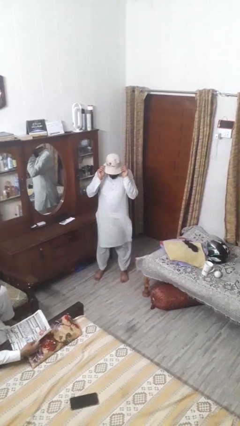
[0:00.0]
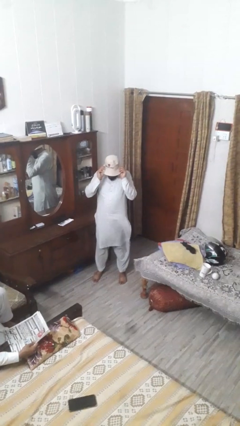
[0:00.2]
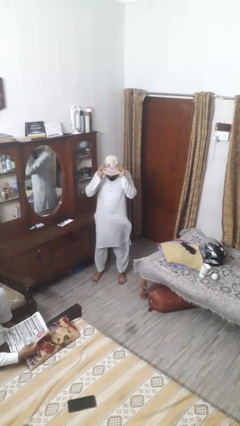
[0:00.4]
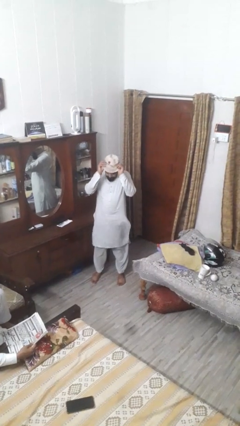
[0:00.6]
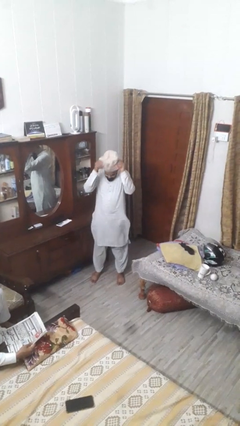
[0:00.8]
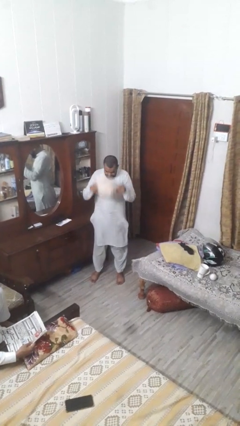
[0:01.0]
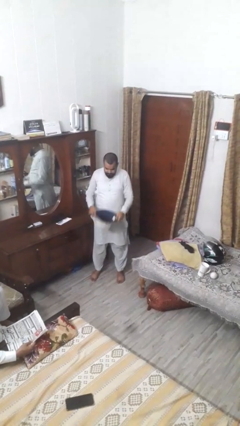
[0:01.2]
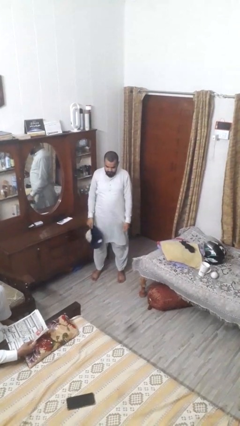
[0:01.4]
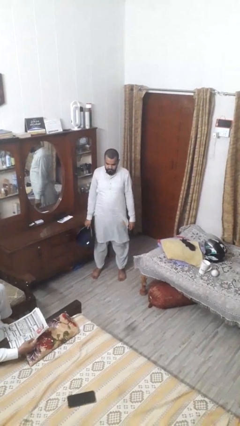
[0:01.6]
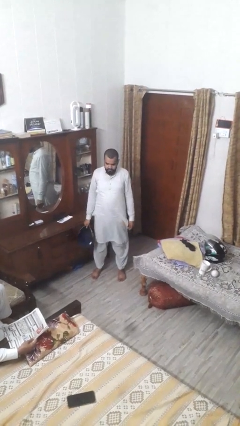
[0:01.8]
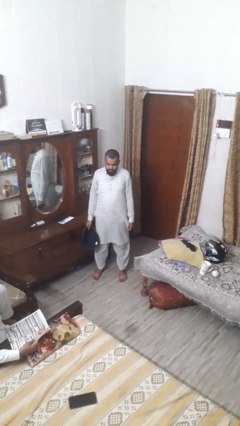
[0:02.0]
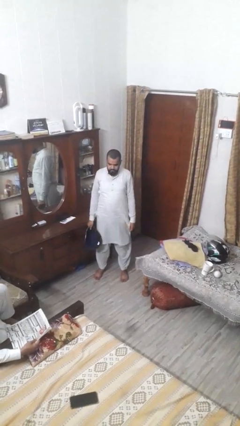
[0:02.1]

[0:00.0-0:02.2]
person takes off hat

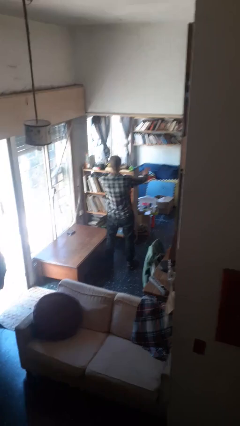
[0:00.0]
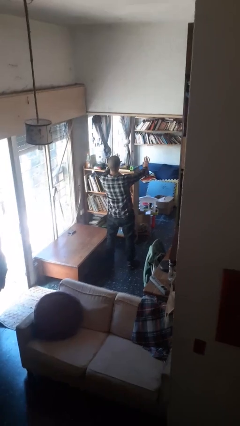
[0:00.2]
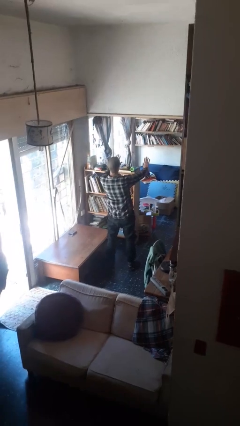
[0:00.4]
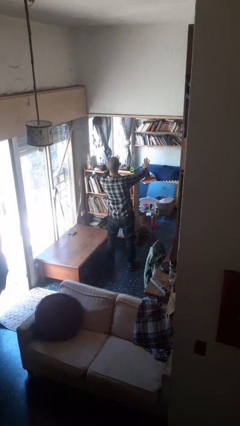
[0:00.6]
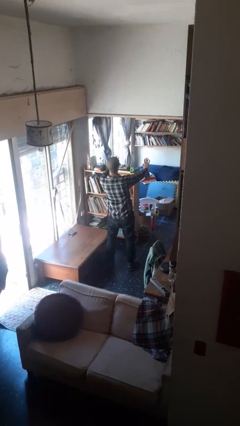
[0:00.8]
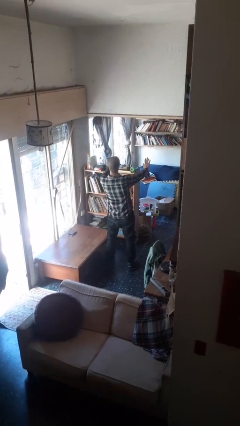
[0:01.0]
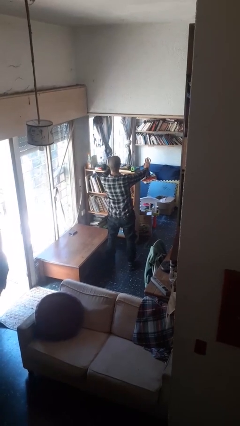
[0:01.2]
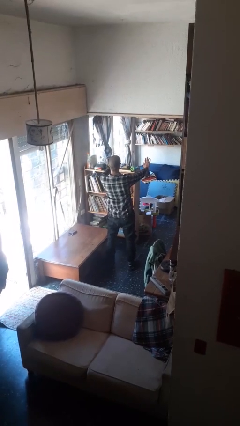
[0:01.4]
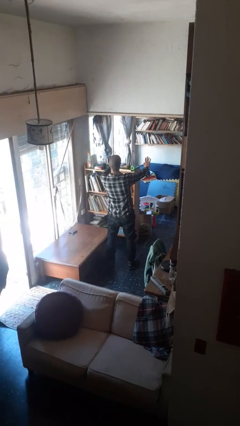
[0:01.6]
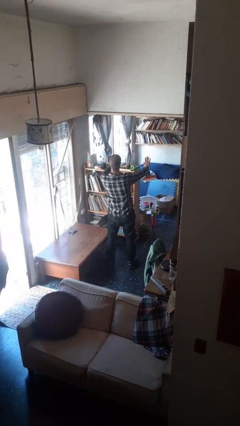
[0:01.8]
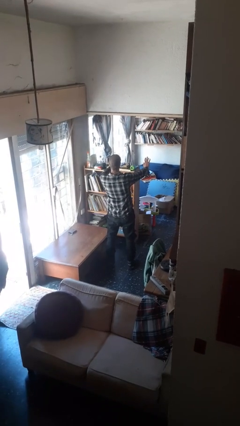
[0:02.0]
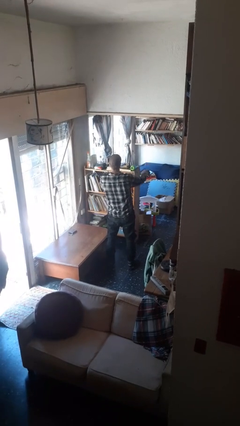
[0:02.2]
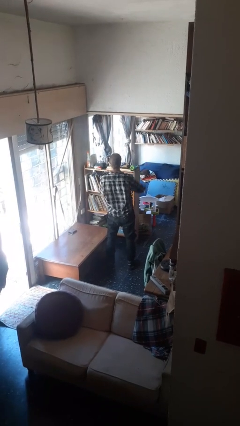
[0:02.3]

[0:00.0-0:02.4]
person gestures stop

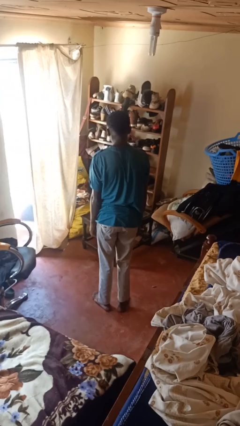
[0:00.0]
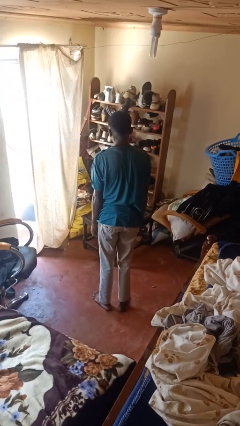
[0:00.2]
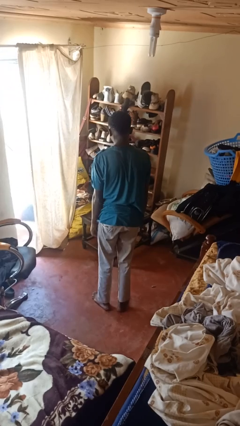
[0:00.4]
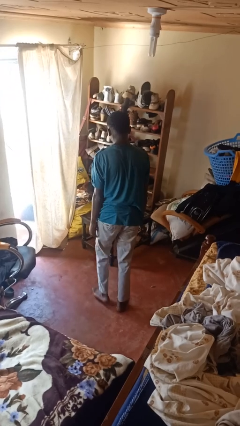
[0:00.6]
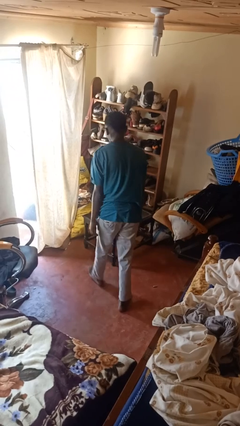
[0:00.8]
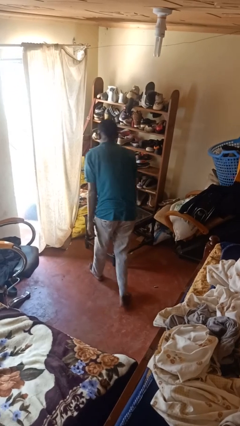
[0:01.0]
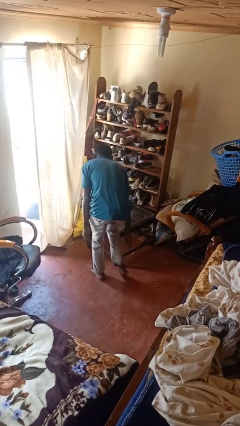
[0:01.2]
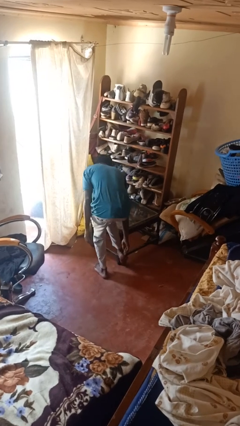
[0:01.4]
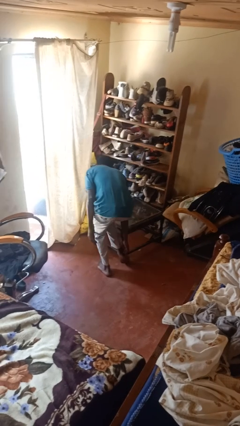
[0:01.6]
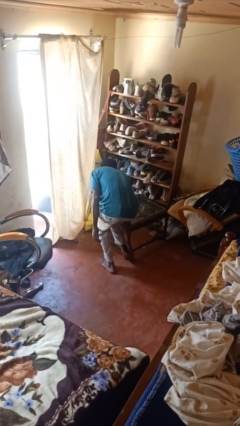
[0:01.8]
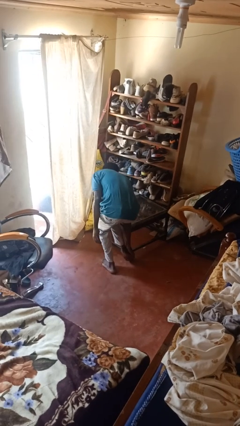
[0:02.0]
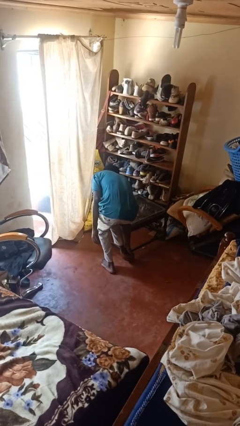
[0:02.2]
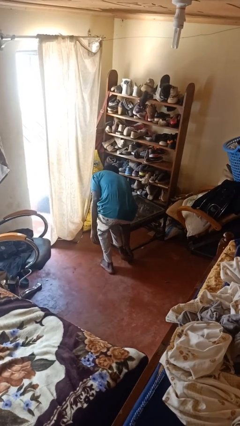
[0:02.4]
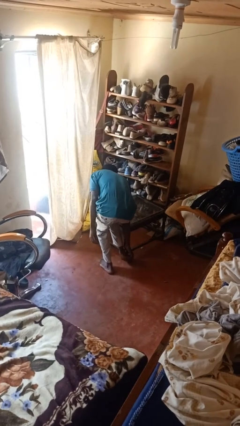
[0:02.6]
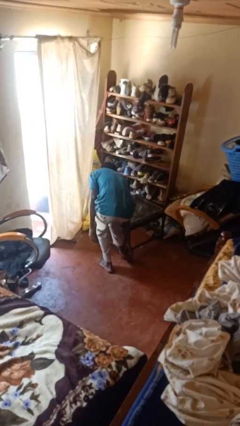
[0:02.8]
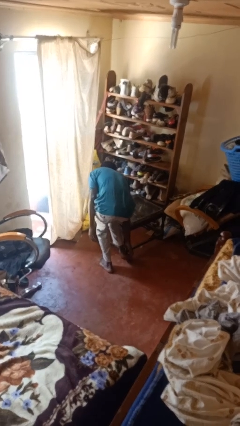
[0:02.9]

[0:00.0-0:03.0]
person stubs toe

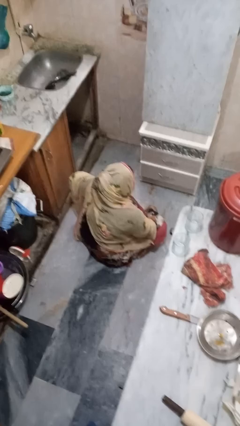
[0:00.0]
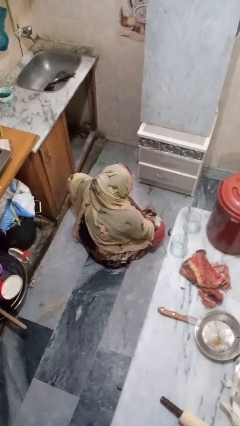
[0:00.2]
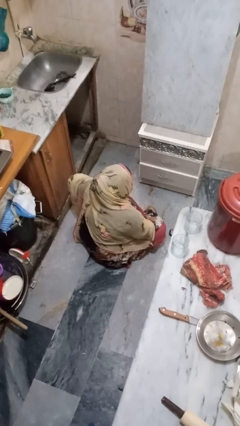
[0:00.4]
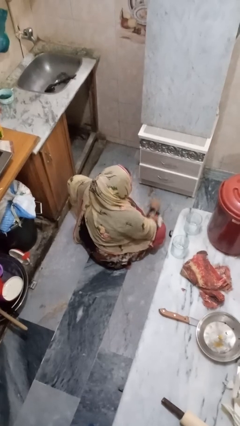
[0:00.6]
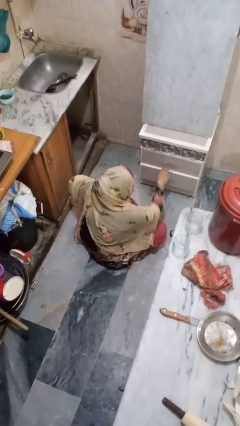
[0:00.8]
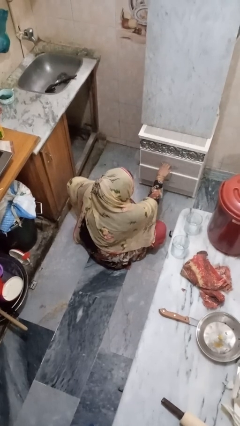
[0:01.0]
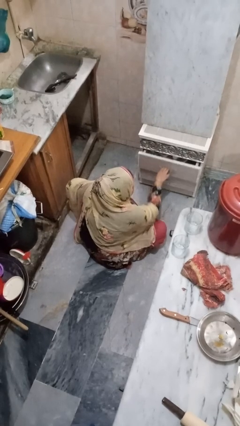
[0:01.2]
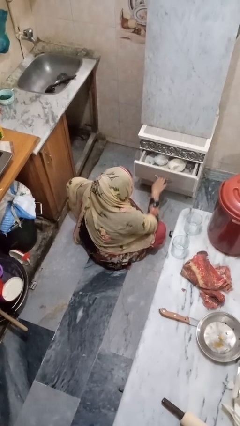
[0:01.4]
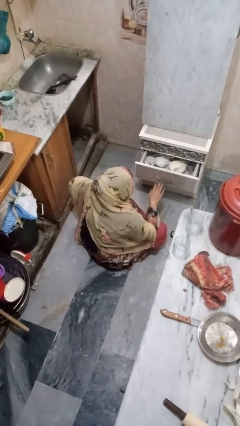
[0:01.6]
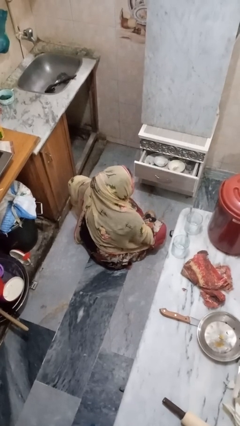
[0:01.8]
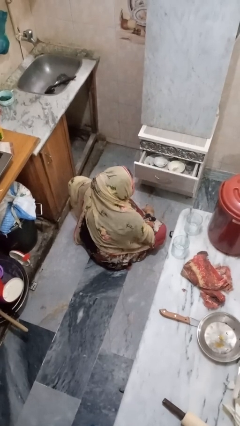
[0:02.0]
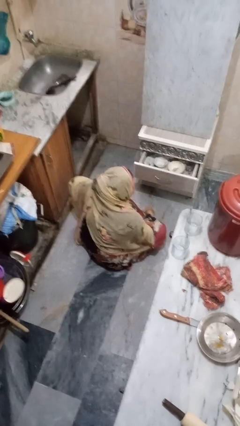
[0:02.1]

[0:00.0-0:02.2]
person opens kitchen drawer

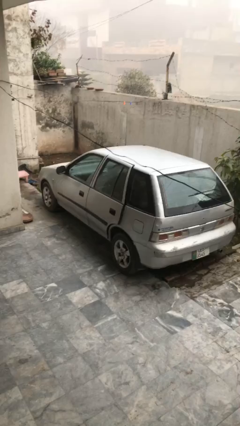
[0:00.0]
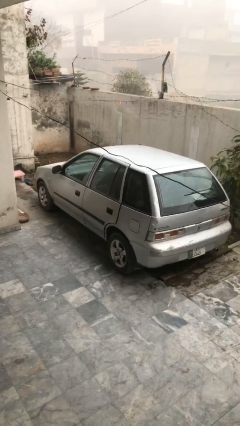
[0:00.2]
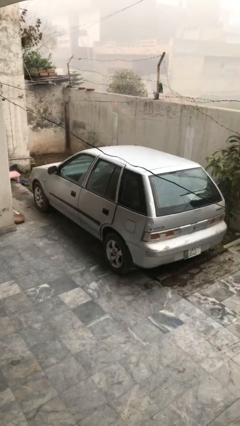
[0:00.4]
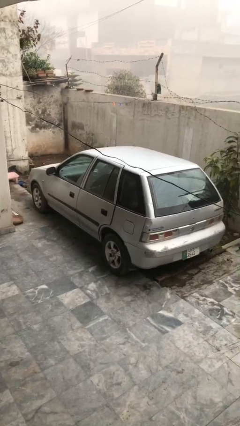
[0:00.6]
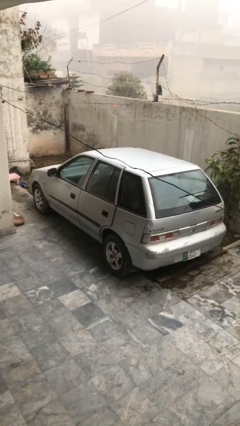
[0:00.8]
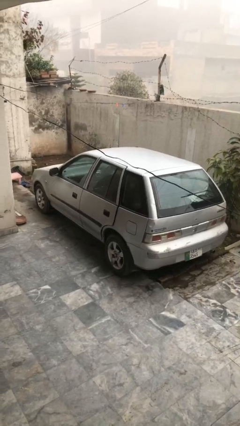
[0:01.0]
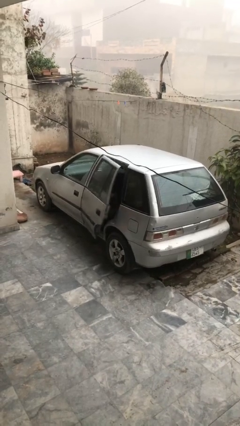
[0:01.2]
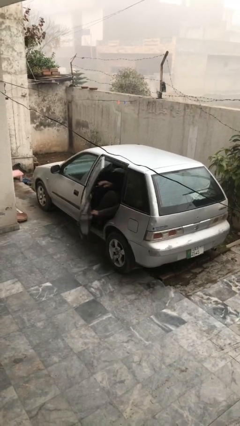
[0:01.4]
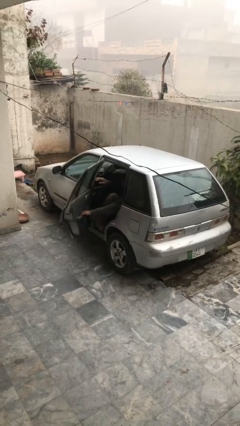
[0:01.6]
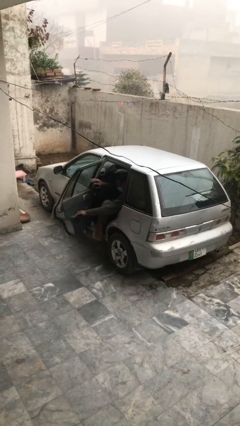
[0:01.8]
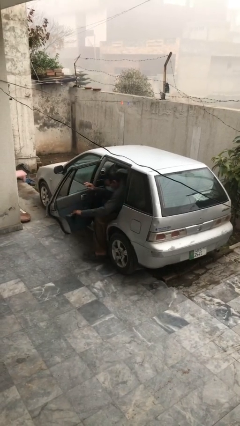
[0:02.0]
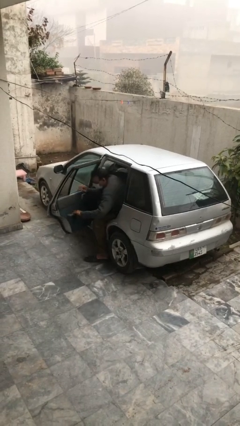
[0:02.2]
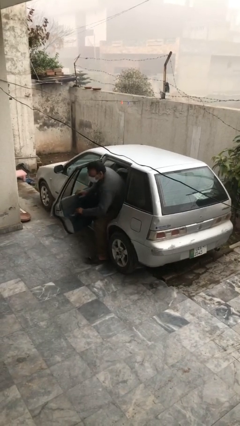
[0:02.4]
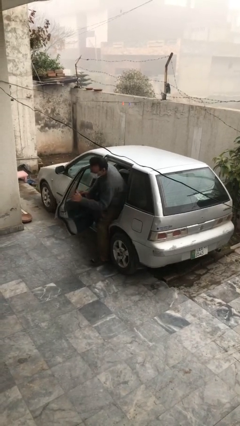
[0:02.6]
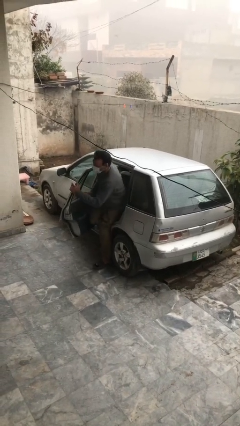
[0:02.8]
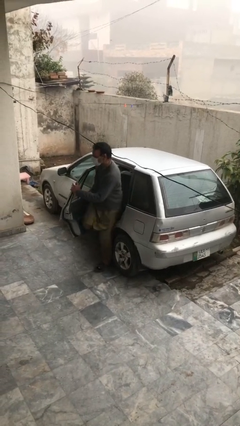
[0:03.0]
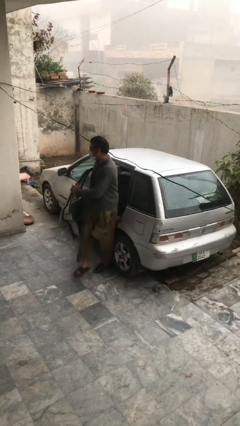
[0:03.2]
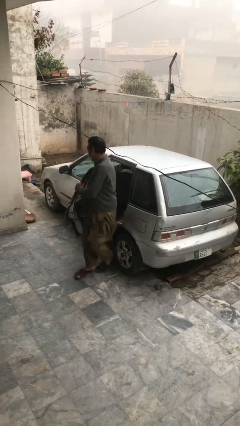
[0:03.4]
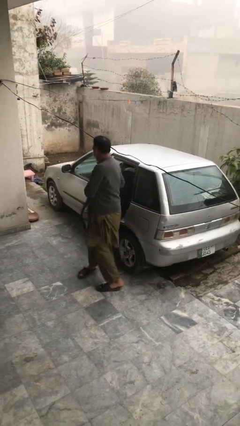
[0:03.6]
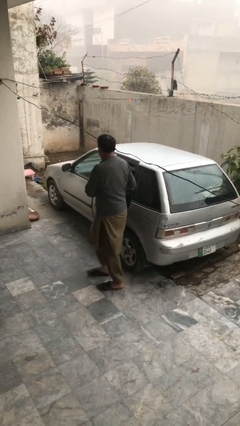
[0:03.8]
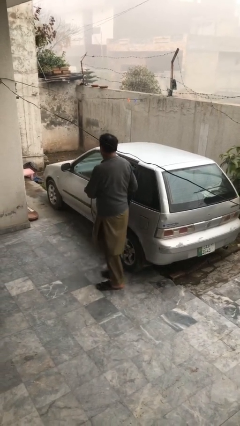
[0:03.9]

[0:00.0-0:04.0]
car drops off person

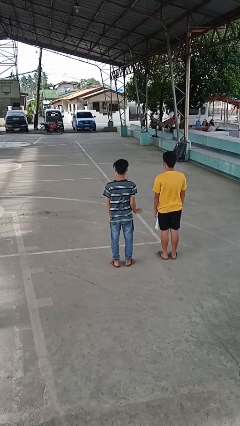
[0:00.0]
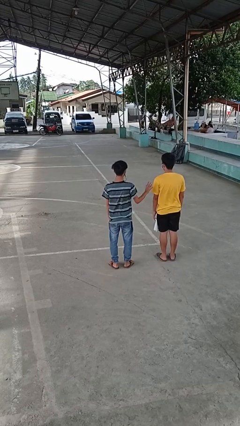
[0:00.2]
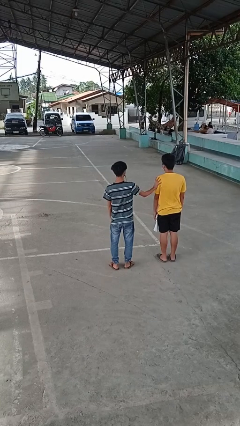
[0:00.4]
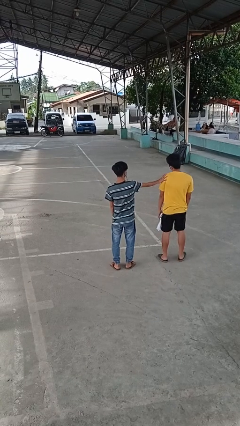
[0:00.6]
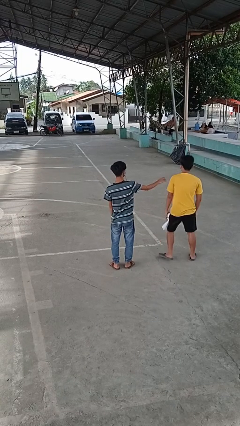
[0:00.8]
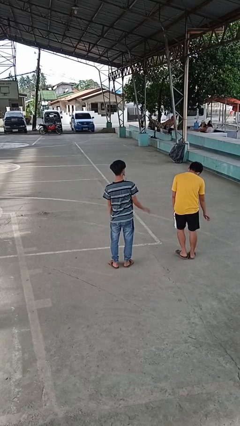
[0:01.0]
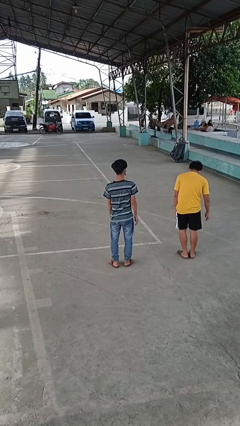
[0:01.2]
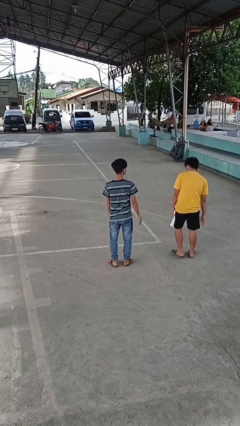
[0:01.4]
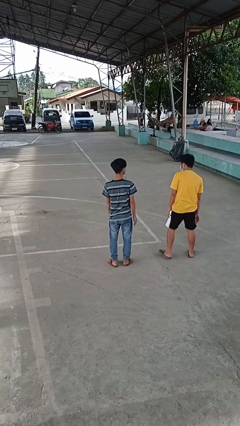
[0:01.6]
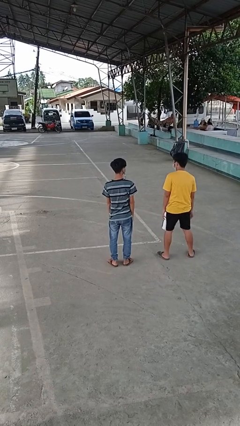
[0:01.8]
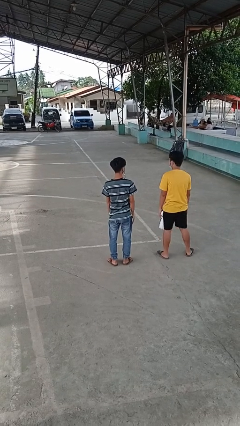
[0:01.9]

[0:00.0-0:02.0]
person shoves person

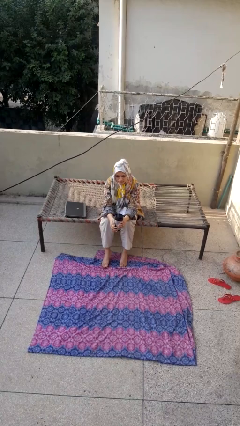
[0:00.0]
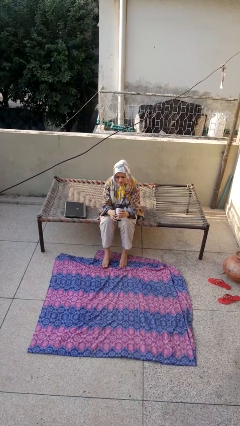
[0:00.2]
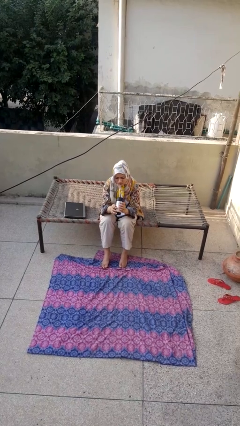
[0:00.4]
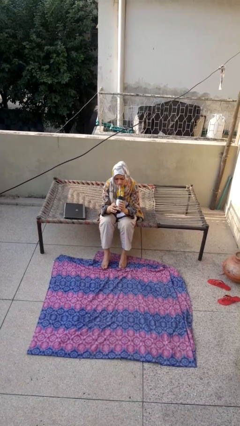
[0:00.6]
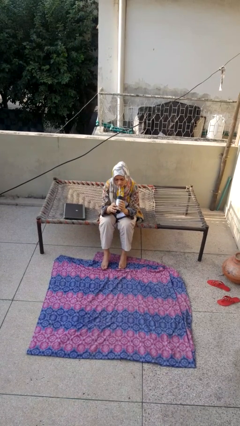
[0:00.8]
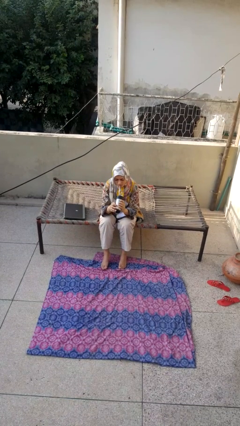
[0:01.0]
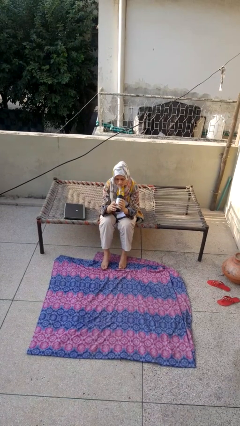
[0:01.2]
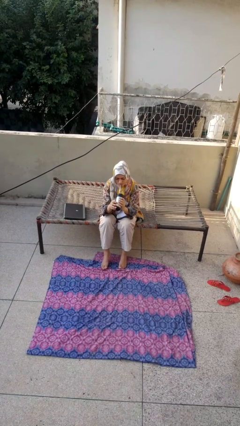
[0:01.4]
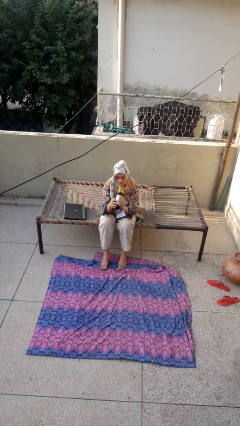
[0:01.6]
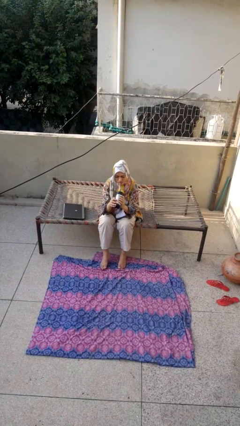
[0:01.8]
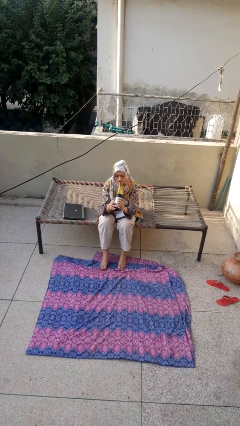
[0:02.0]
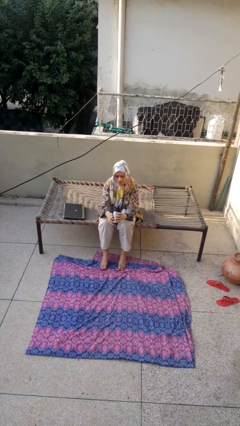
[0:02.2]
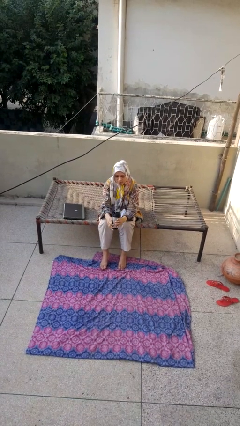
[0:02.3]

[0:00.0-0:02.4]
person drinks from straw
